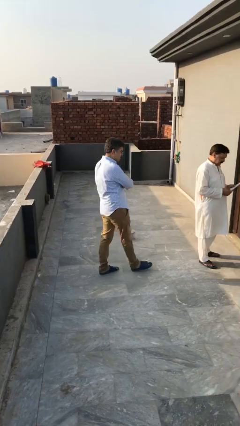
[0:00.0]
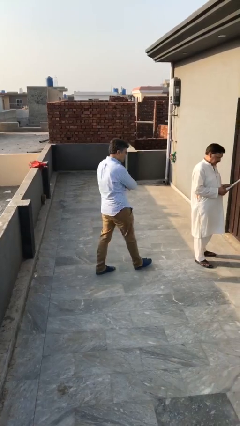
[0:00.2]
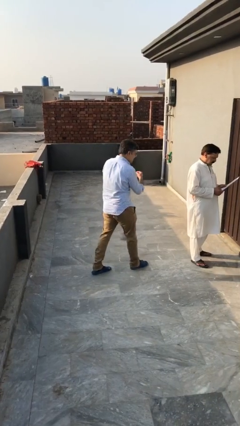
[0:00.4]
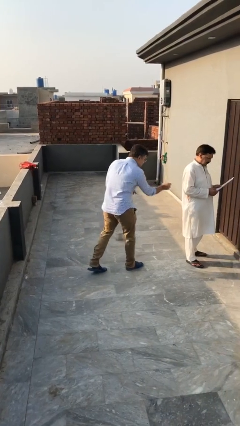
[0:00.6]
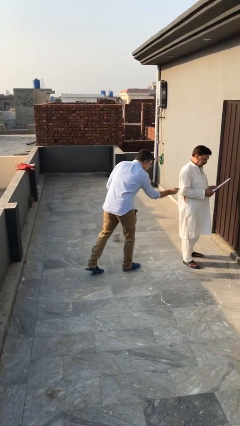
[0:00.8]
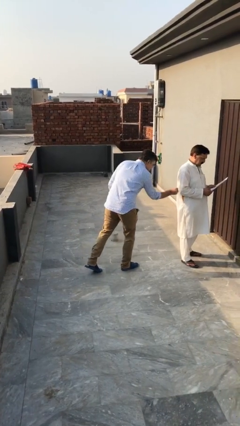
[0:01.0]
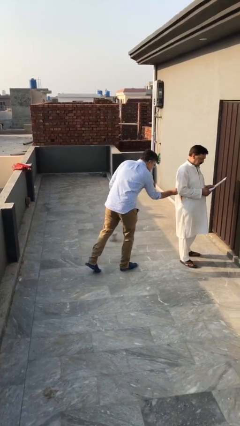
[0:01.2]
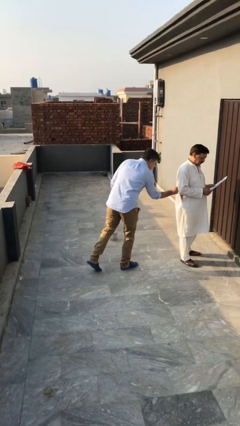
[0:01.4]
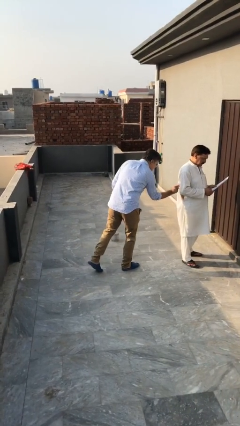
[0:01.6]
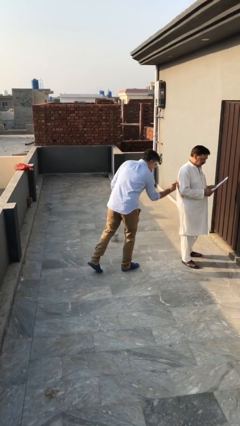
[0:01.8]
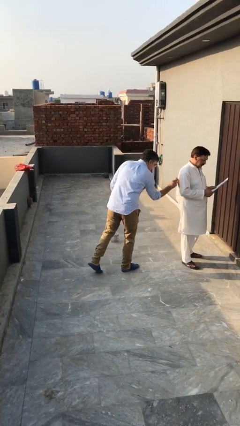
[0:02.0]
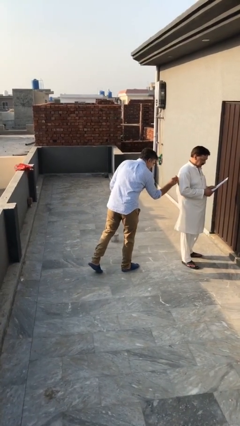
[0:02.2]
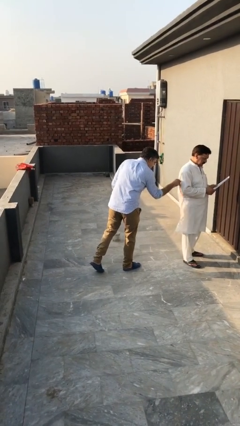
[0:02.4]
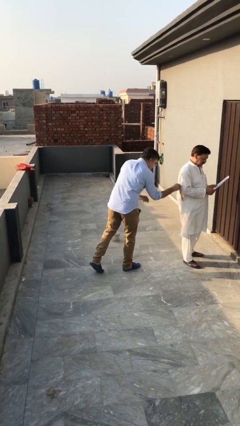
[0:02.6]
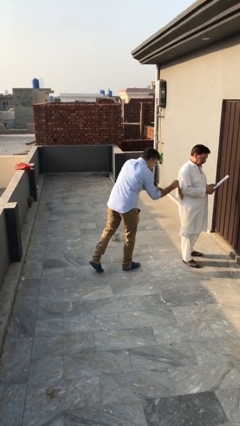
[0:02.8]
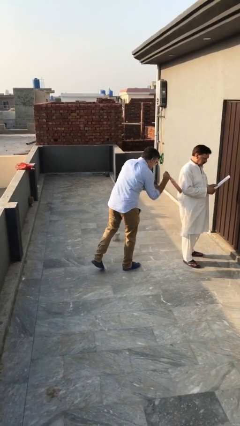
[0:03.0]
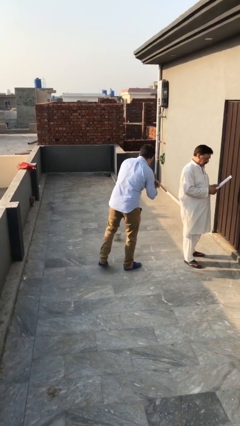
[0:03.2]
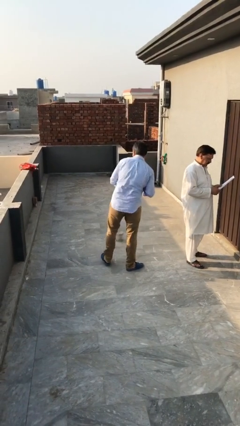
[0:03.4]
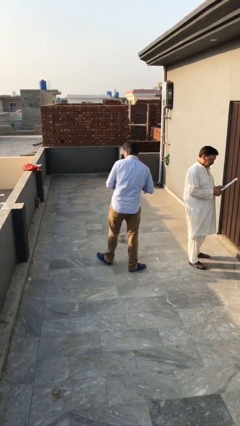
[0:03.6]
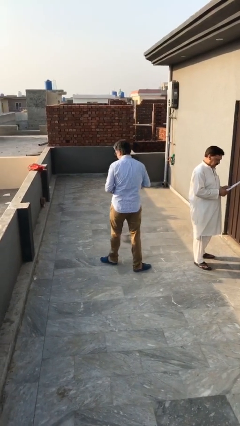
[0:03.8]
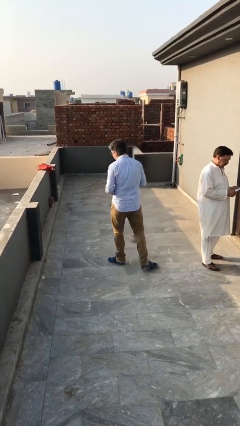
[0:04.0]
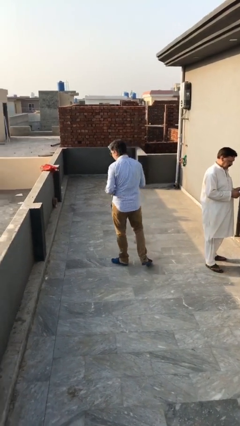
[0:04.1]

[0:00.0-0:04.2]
person steals object from person

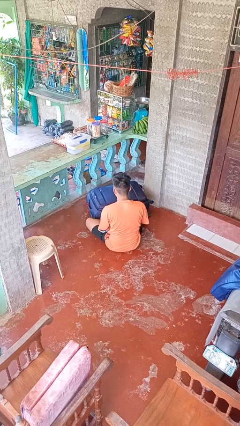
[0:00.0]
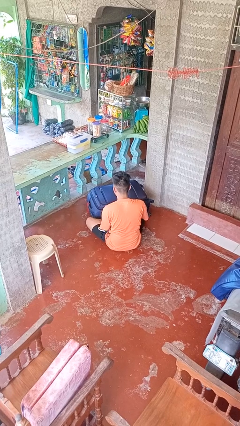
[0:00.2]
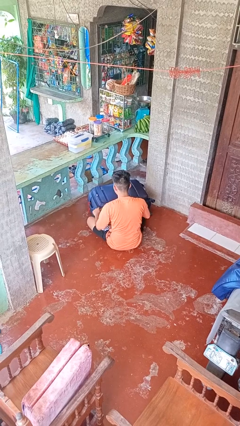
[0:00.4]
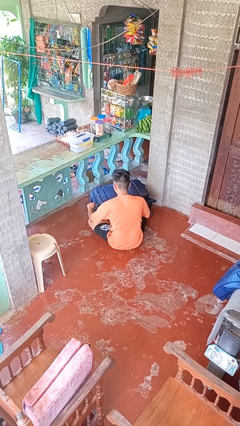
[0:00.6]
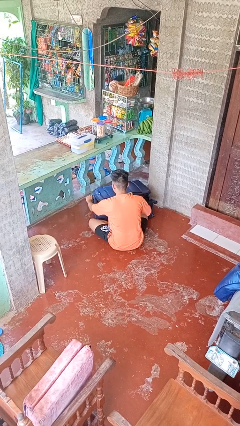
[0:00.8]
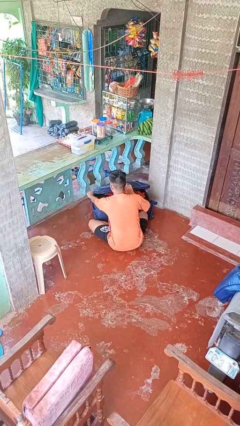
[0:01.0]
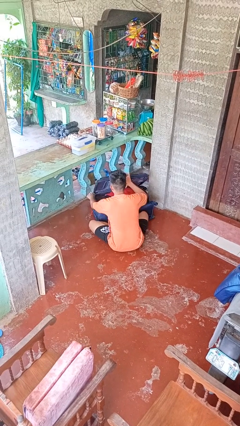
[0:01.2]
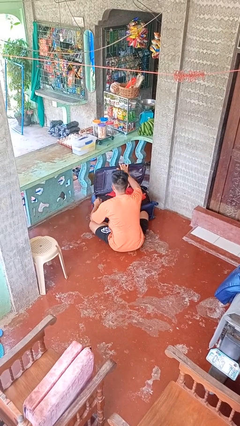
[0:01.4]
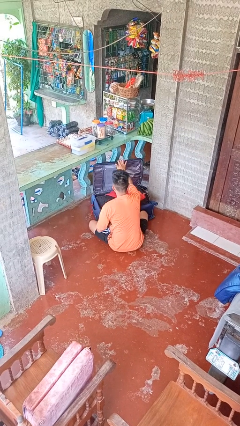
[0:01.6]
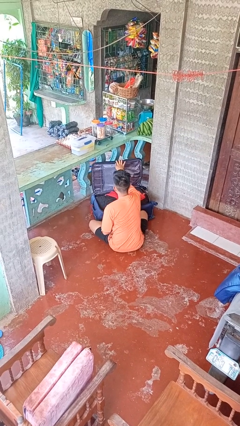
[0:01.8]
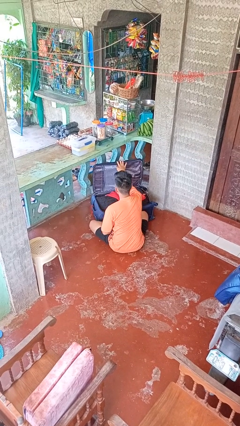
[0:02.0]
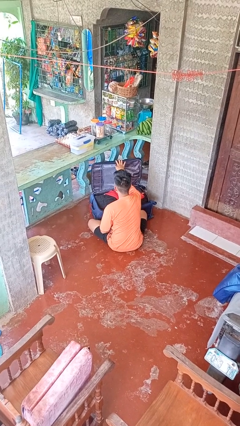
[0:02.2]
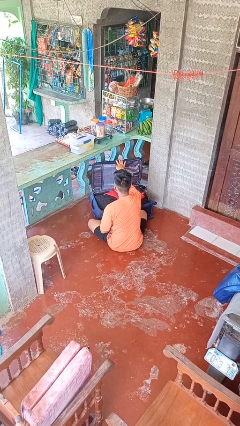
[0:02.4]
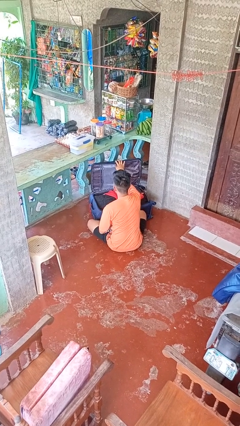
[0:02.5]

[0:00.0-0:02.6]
person opens suitcase

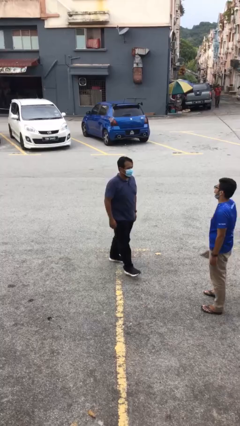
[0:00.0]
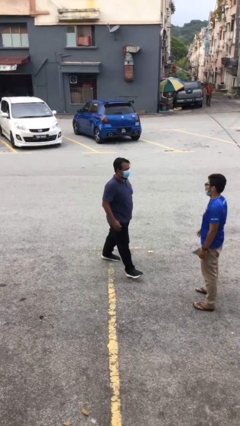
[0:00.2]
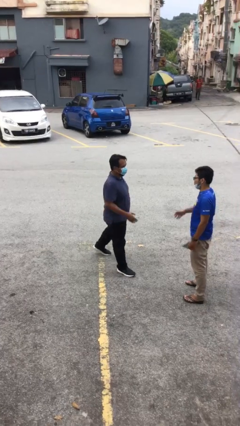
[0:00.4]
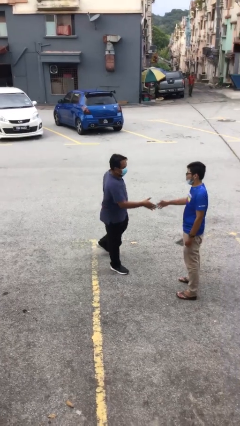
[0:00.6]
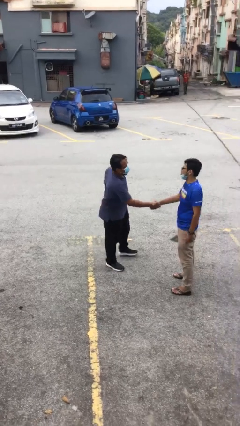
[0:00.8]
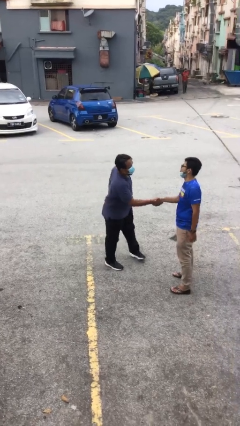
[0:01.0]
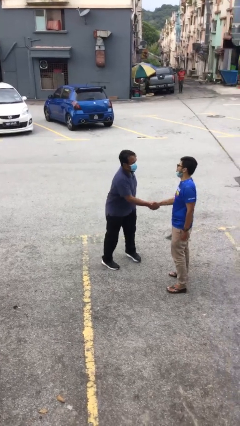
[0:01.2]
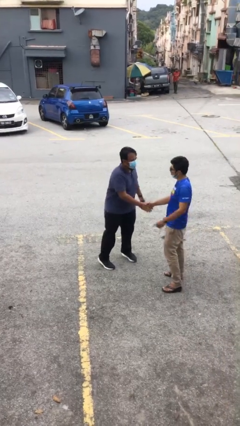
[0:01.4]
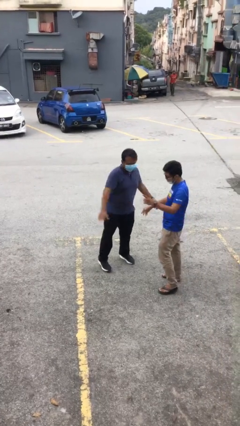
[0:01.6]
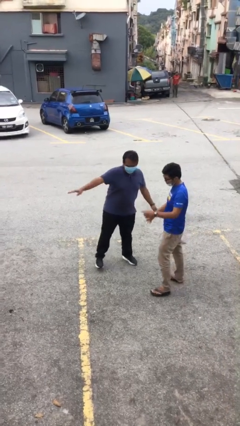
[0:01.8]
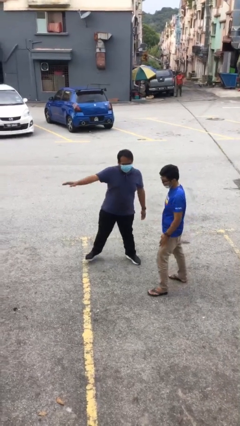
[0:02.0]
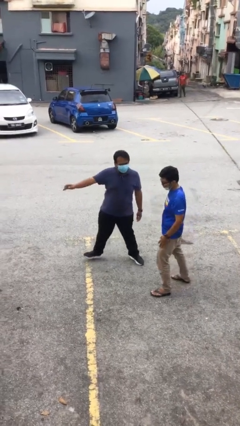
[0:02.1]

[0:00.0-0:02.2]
person shakes hand

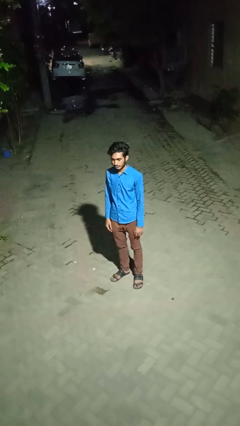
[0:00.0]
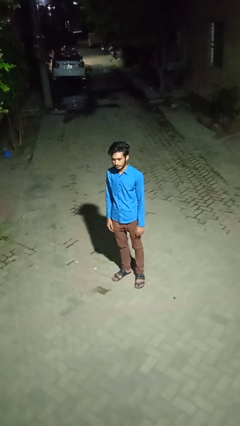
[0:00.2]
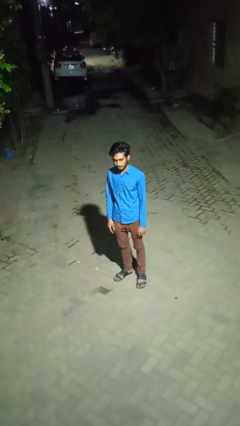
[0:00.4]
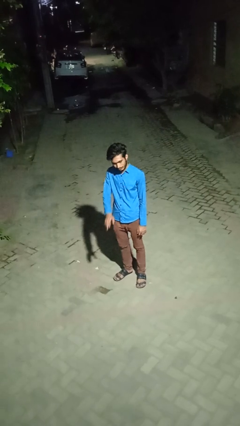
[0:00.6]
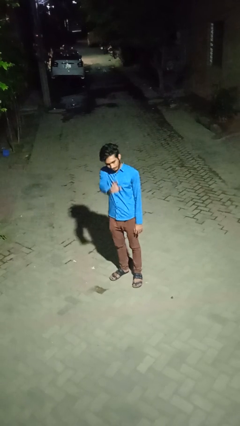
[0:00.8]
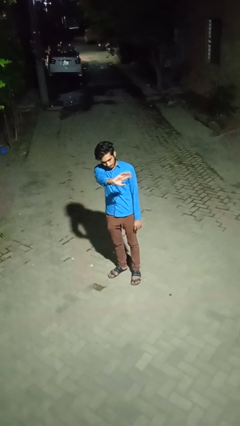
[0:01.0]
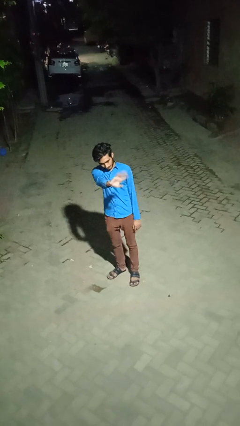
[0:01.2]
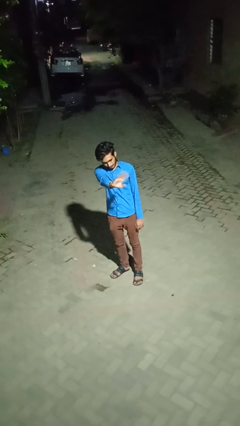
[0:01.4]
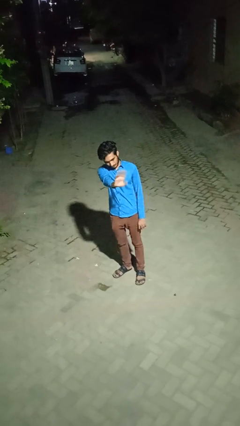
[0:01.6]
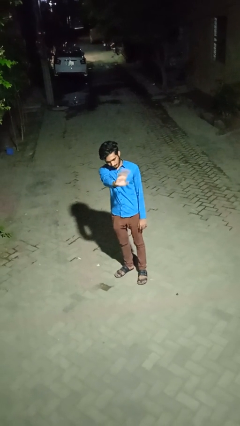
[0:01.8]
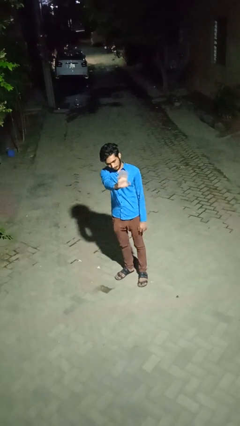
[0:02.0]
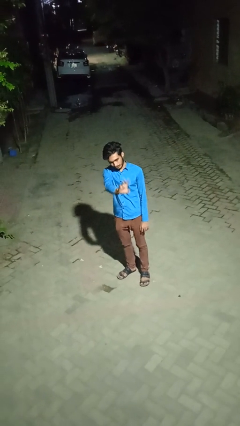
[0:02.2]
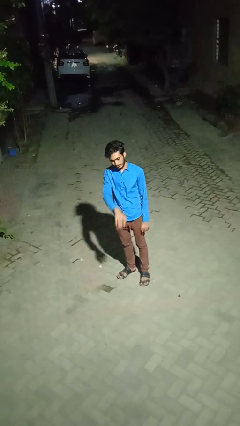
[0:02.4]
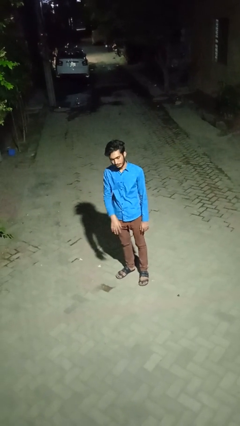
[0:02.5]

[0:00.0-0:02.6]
person waves at person

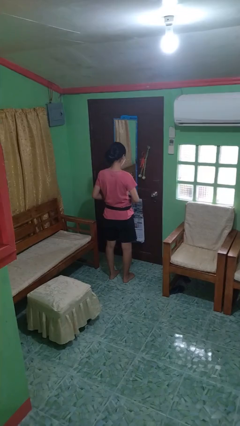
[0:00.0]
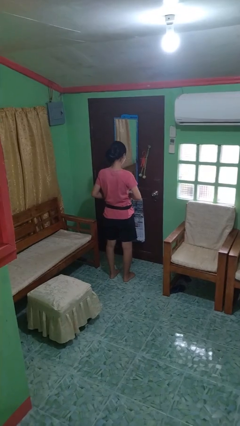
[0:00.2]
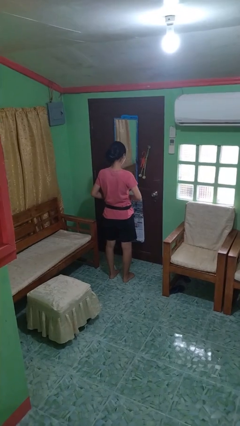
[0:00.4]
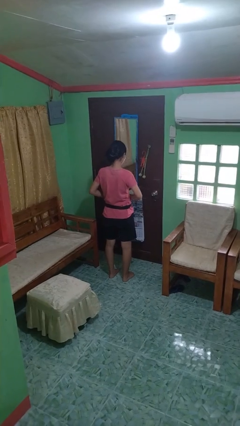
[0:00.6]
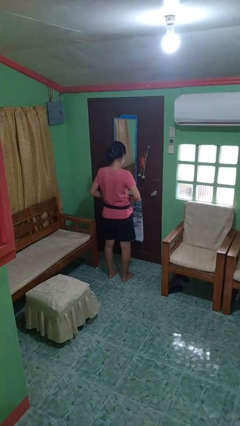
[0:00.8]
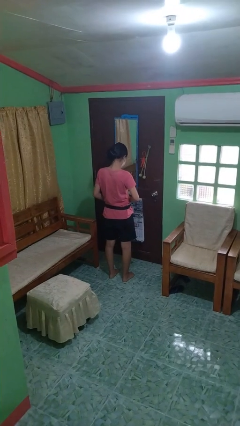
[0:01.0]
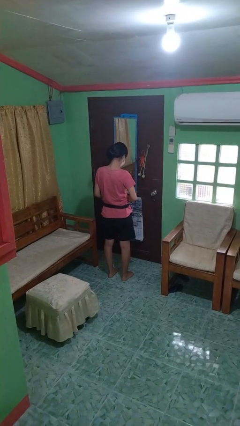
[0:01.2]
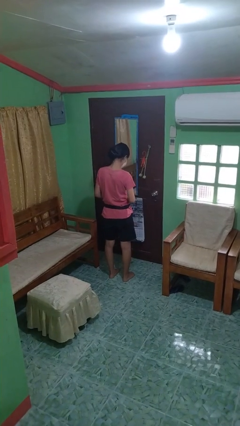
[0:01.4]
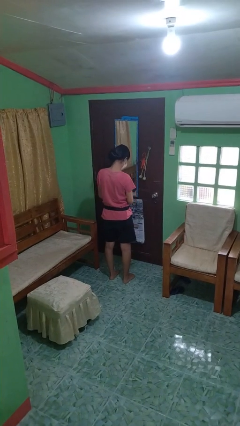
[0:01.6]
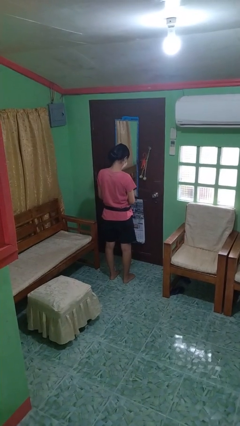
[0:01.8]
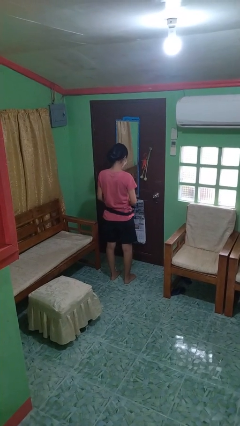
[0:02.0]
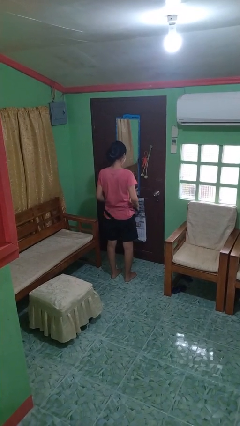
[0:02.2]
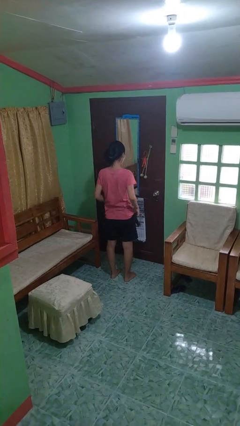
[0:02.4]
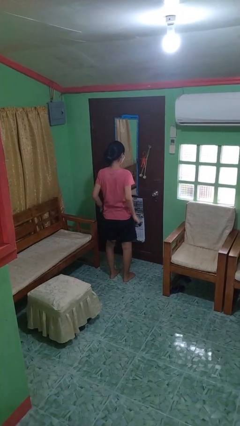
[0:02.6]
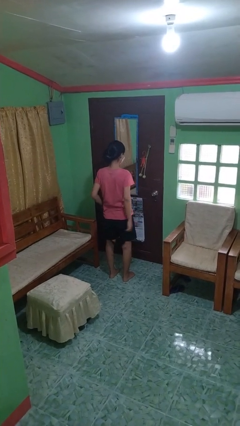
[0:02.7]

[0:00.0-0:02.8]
person takes off belt

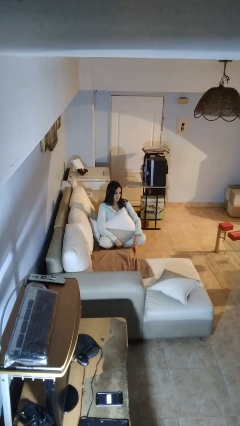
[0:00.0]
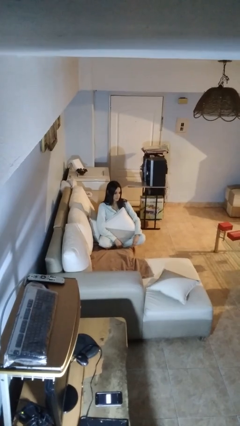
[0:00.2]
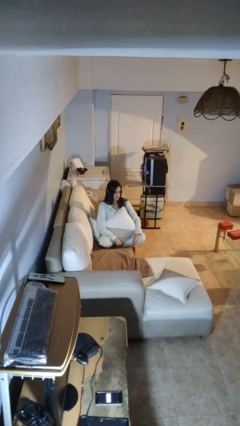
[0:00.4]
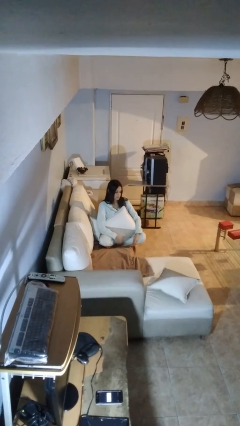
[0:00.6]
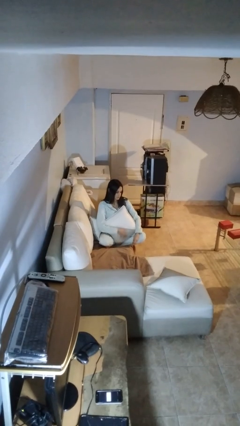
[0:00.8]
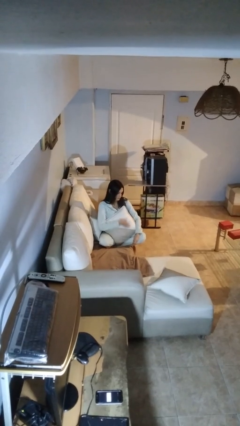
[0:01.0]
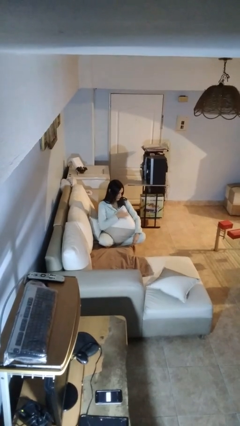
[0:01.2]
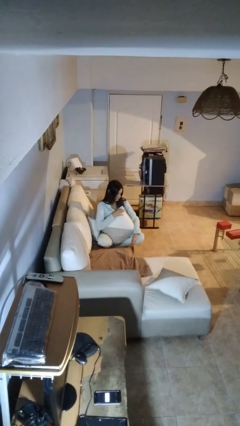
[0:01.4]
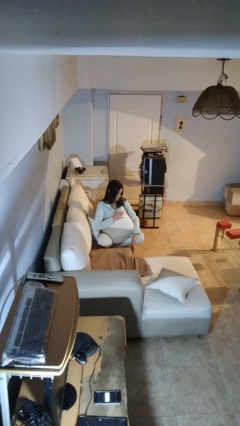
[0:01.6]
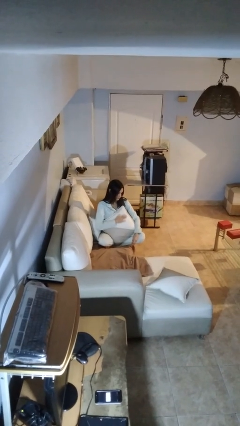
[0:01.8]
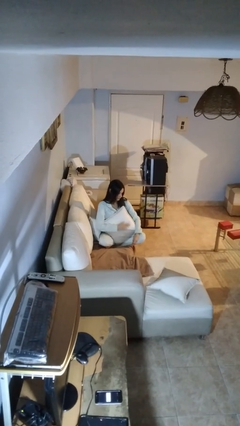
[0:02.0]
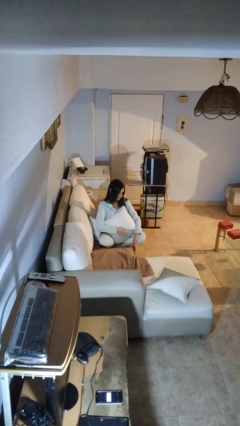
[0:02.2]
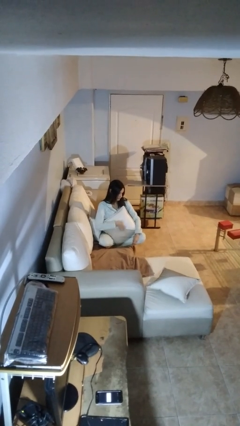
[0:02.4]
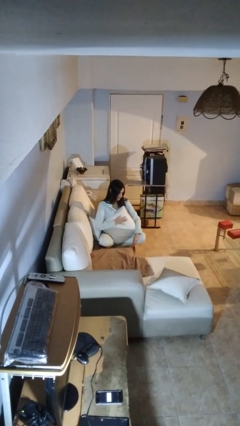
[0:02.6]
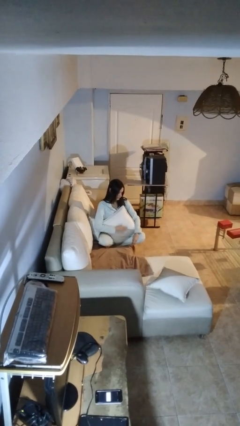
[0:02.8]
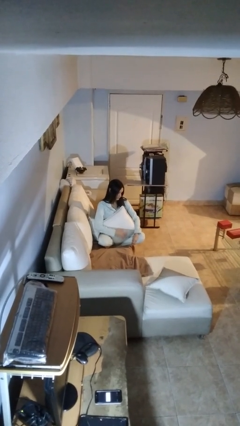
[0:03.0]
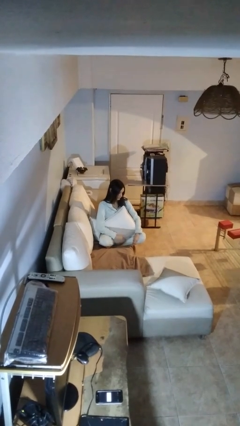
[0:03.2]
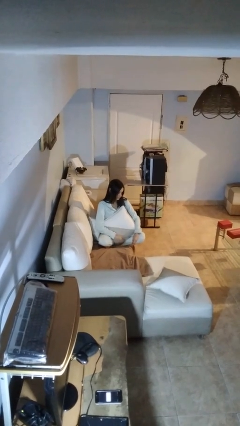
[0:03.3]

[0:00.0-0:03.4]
person waves hand over object
